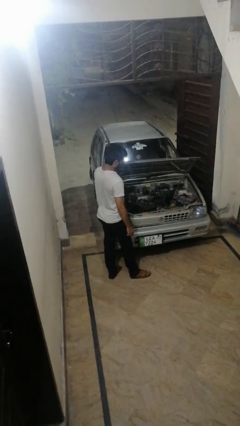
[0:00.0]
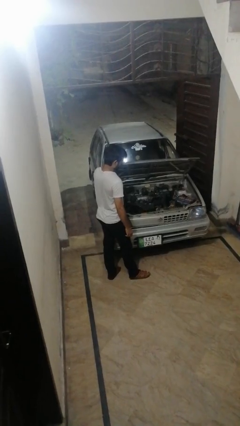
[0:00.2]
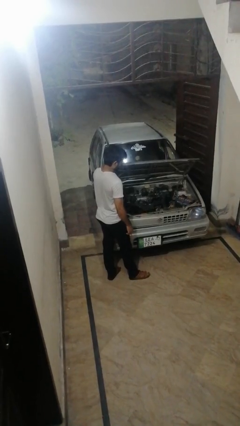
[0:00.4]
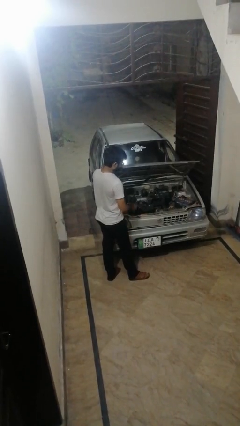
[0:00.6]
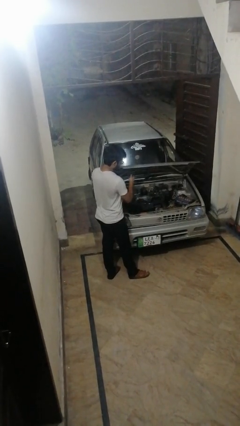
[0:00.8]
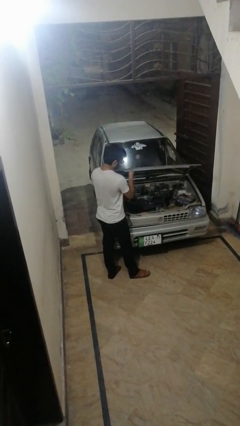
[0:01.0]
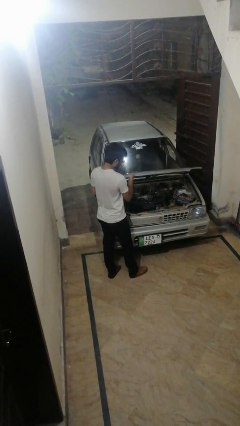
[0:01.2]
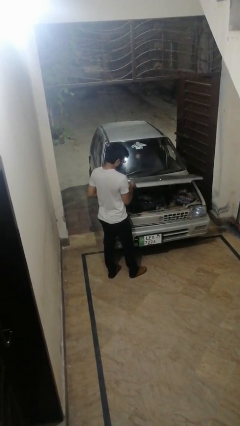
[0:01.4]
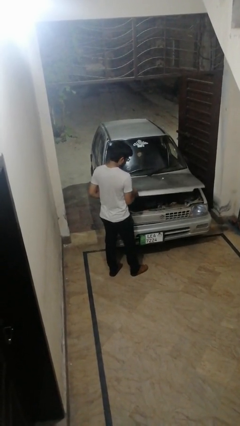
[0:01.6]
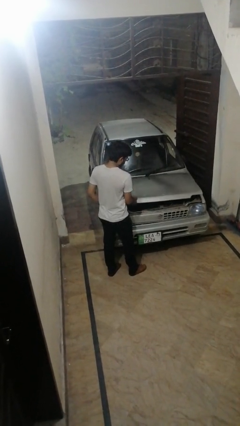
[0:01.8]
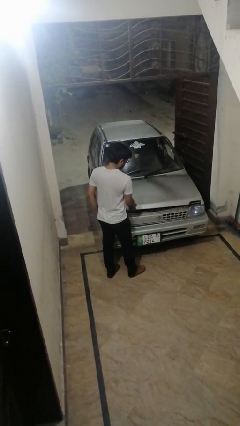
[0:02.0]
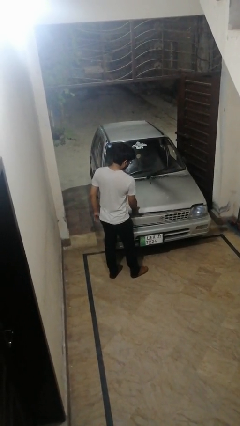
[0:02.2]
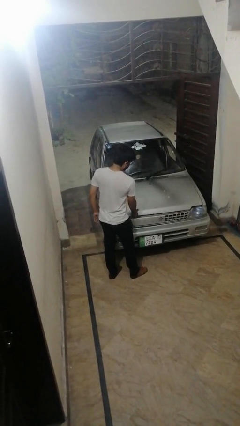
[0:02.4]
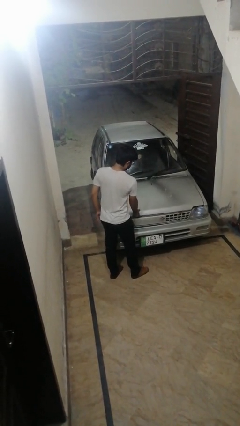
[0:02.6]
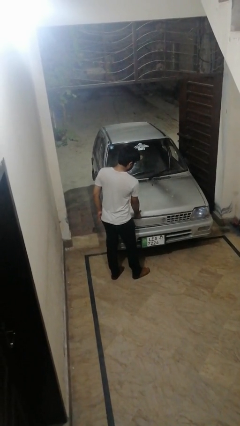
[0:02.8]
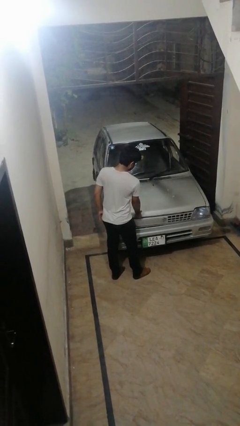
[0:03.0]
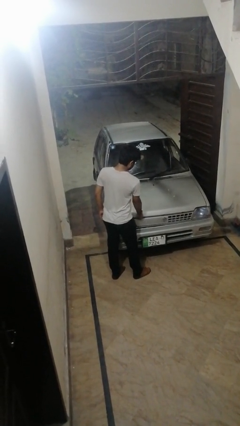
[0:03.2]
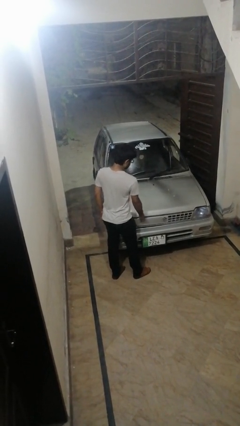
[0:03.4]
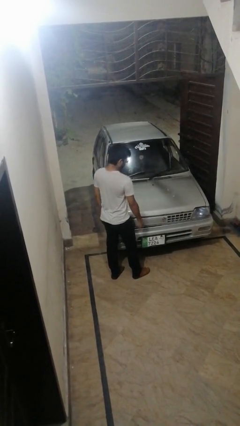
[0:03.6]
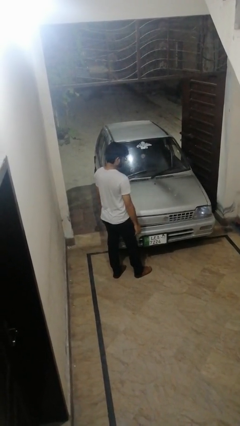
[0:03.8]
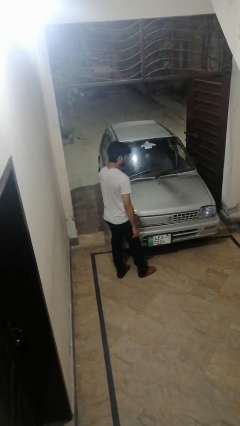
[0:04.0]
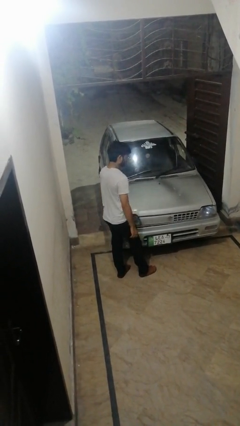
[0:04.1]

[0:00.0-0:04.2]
person closes car hood

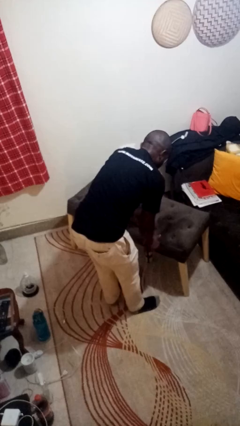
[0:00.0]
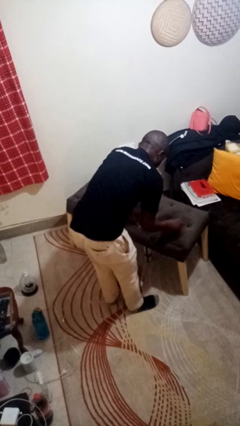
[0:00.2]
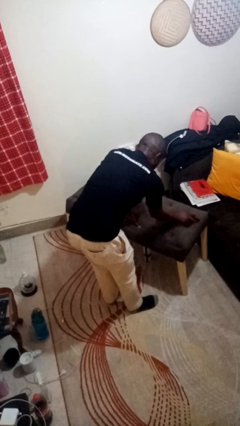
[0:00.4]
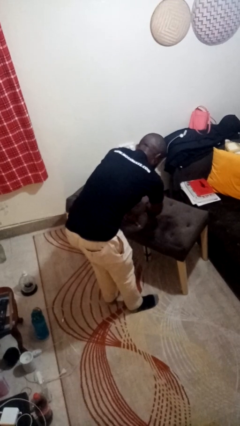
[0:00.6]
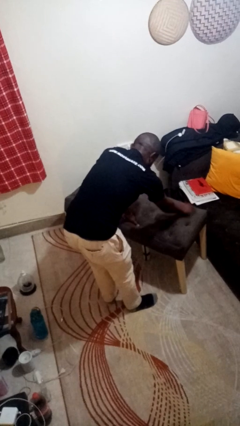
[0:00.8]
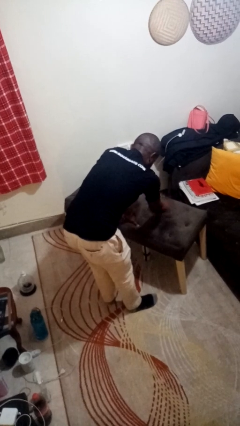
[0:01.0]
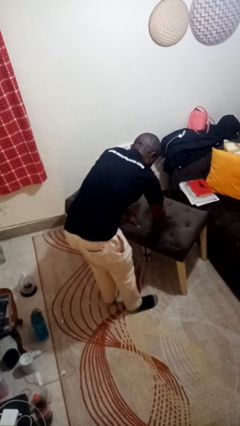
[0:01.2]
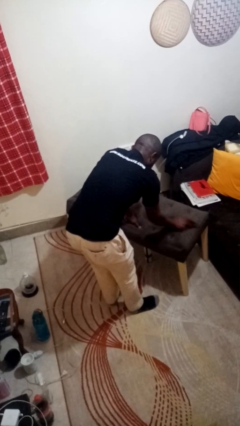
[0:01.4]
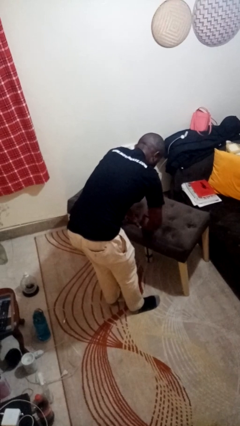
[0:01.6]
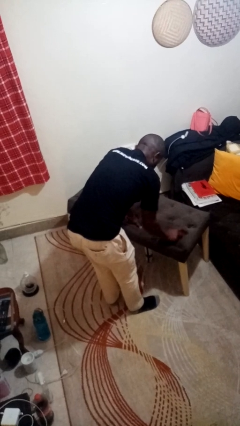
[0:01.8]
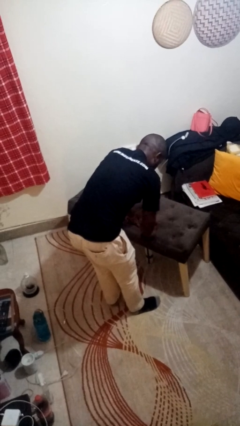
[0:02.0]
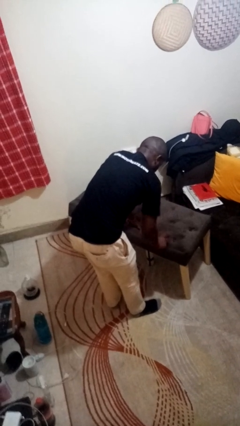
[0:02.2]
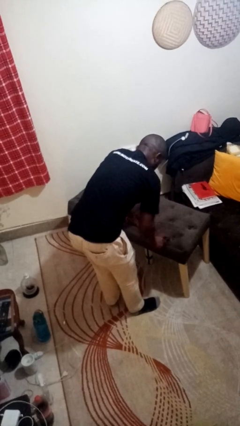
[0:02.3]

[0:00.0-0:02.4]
person cleans table with rag

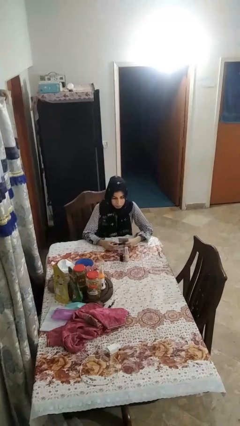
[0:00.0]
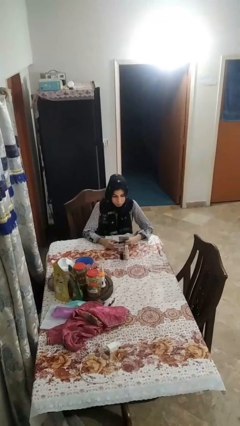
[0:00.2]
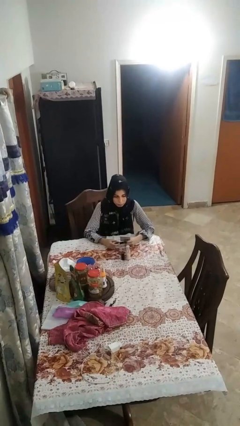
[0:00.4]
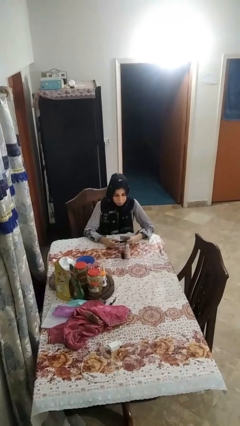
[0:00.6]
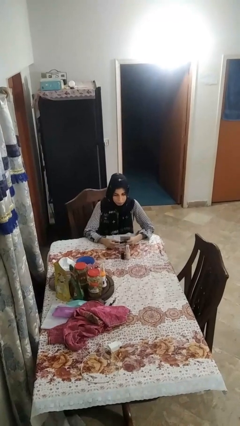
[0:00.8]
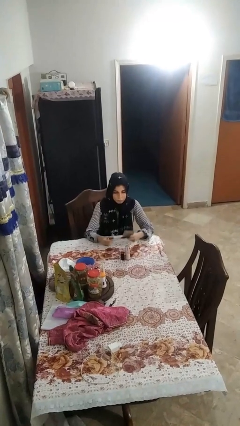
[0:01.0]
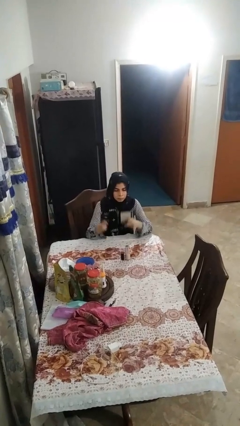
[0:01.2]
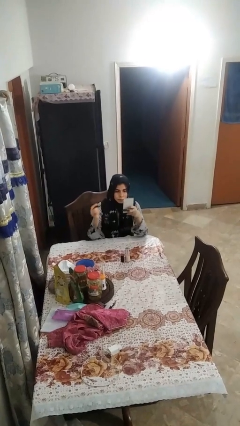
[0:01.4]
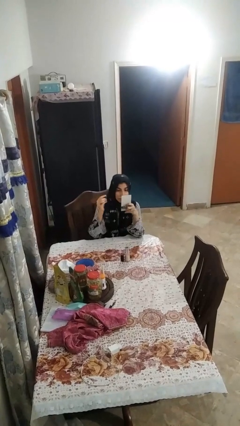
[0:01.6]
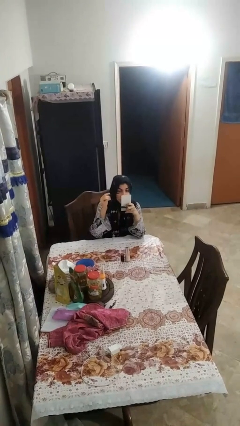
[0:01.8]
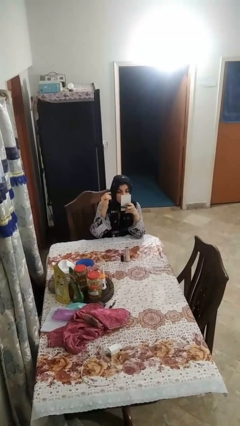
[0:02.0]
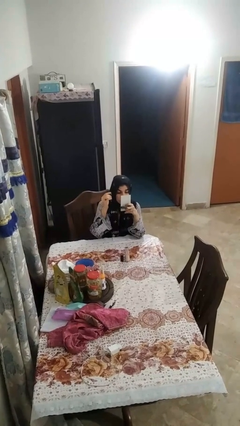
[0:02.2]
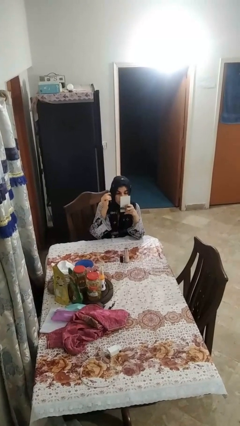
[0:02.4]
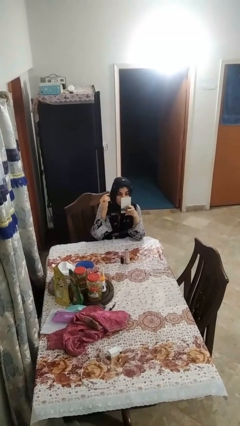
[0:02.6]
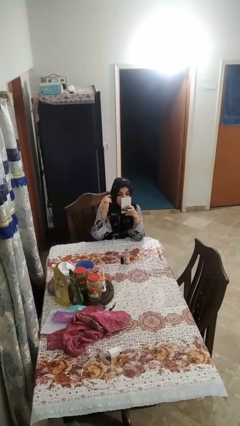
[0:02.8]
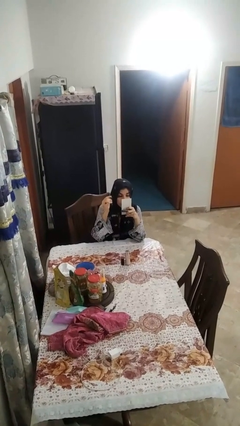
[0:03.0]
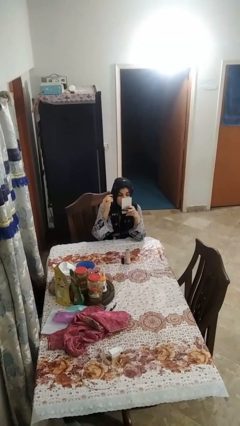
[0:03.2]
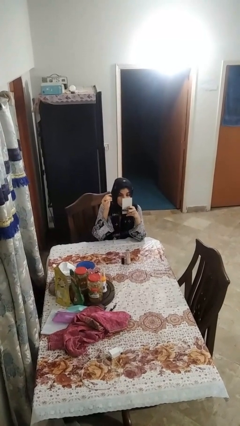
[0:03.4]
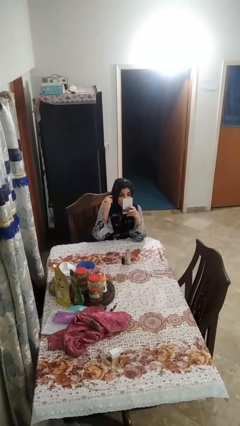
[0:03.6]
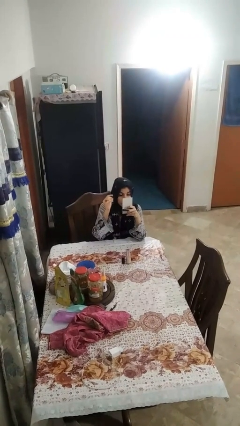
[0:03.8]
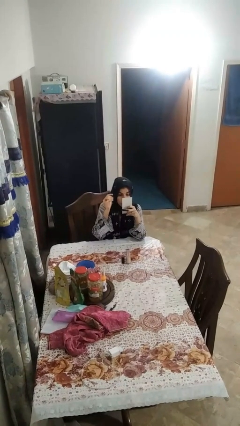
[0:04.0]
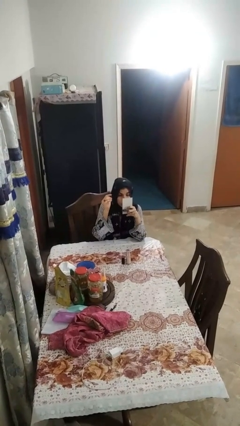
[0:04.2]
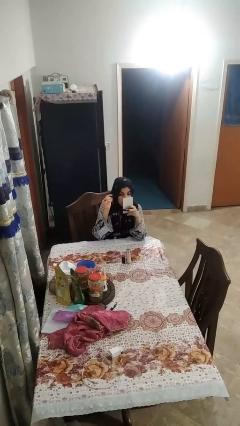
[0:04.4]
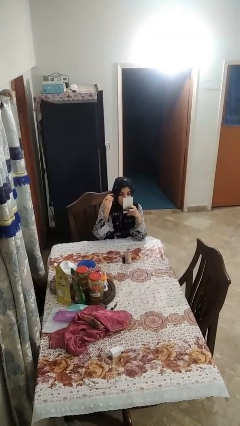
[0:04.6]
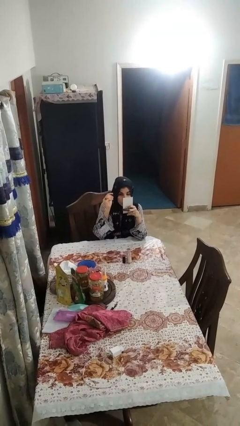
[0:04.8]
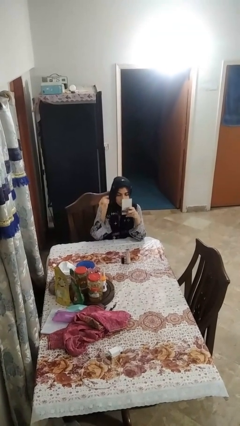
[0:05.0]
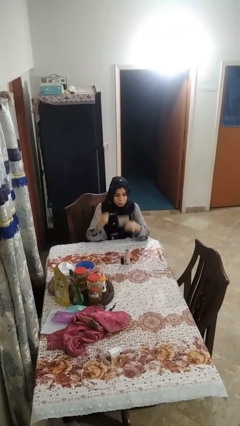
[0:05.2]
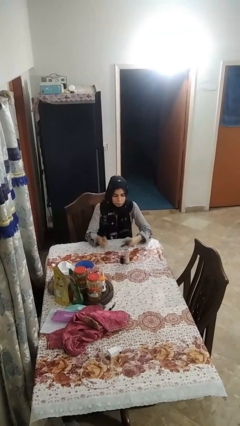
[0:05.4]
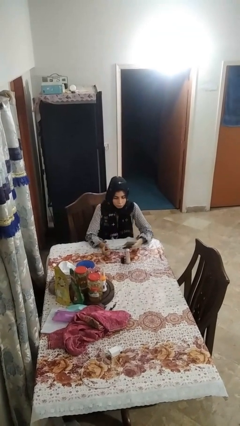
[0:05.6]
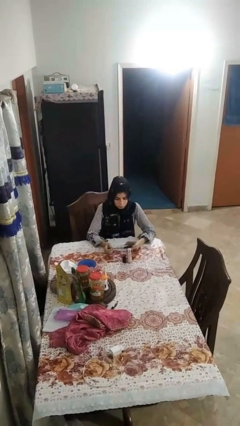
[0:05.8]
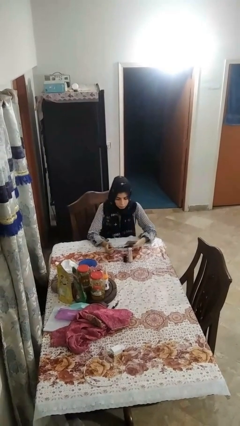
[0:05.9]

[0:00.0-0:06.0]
person applies eye makeup

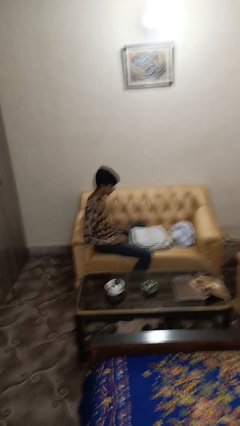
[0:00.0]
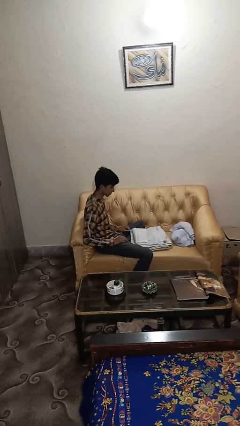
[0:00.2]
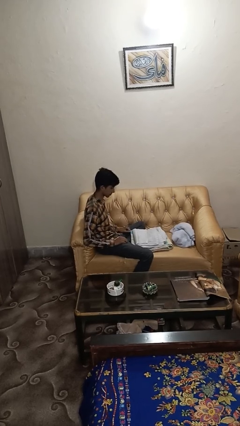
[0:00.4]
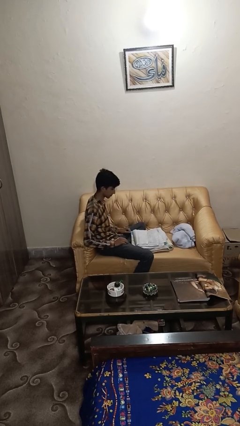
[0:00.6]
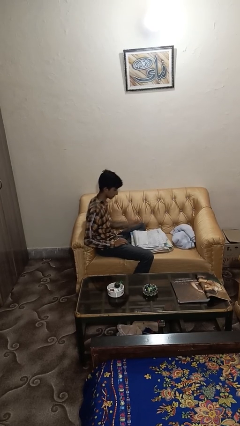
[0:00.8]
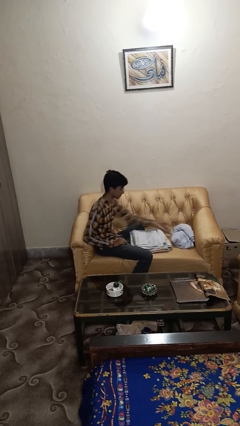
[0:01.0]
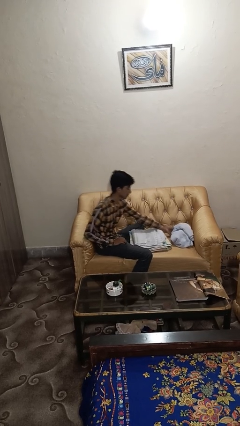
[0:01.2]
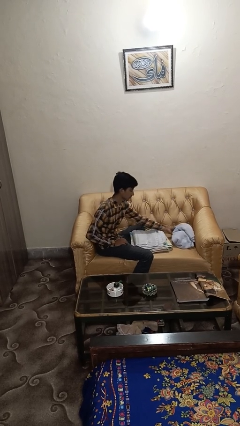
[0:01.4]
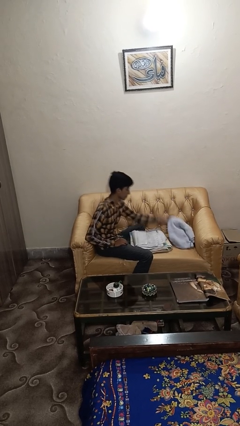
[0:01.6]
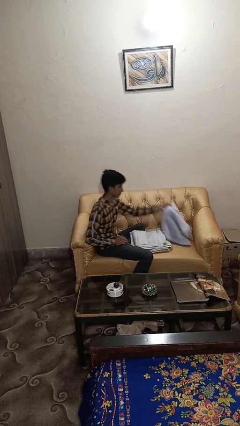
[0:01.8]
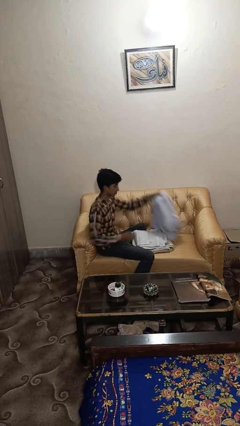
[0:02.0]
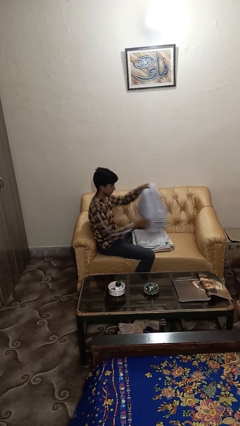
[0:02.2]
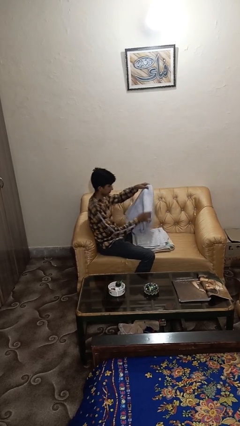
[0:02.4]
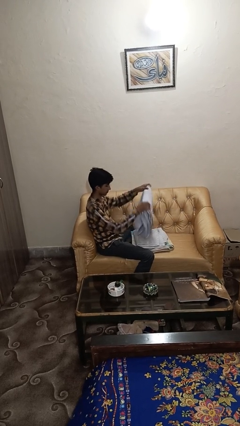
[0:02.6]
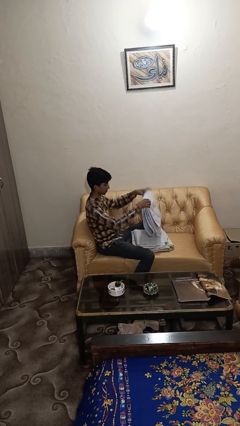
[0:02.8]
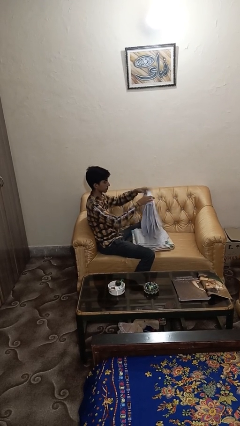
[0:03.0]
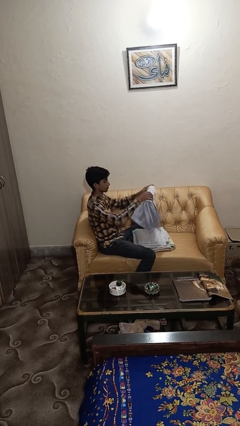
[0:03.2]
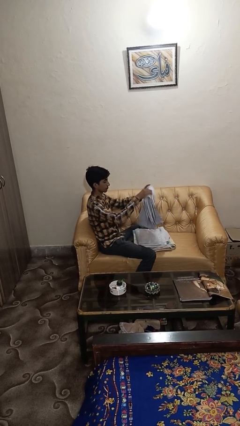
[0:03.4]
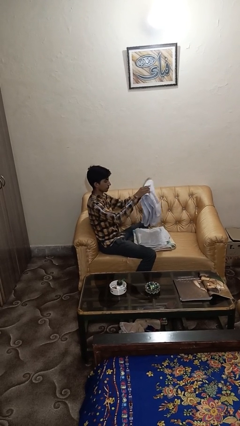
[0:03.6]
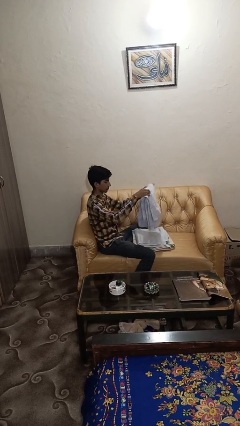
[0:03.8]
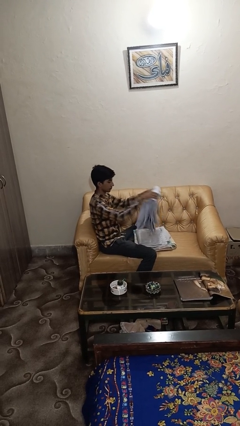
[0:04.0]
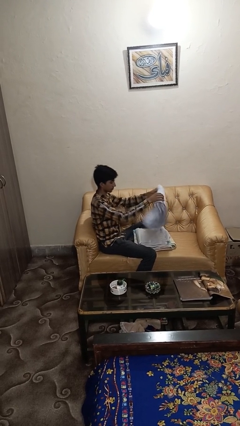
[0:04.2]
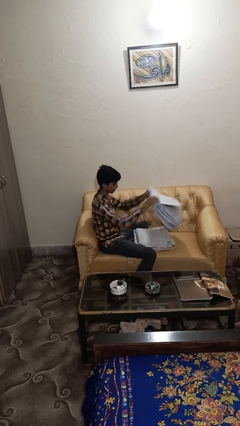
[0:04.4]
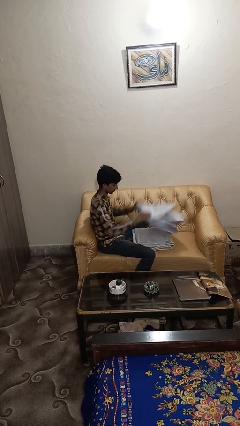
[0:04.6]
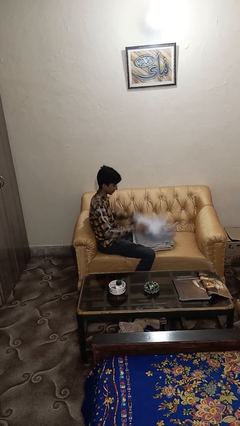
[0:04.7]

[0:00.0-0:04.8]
person folds towel

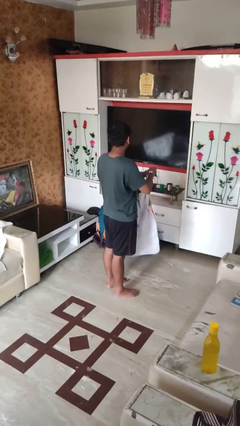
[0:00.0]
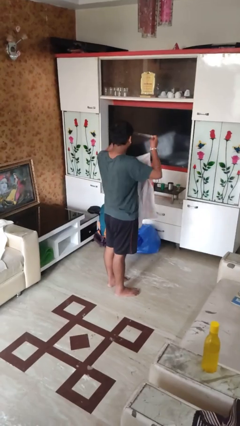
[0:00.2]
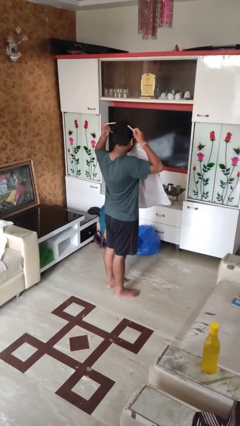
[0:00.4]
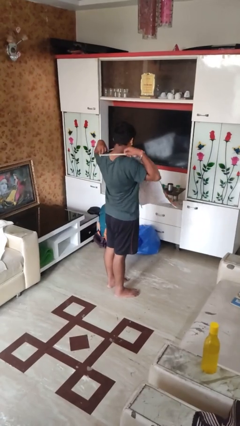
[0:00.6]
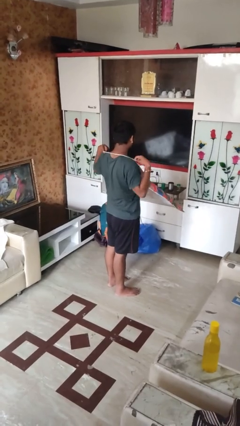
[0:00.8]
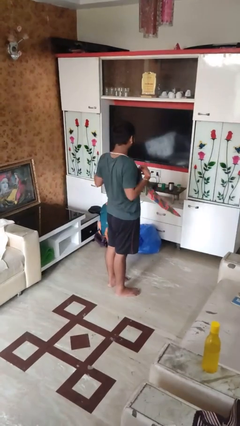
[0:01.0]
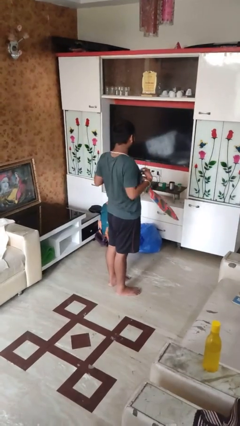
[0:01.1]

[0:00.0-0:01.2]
person puts on apron
